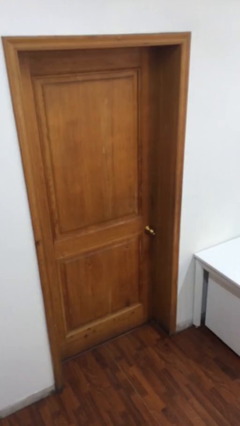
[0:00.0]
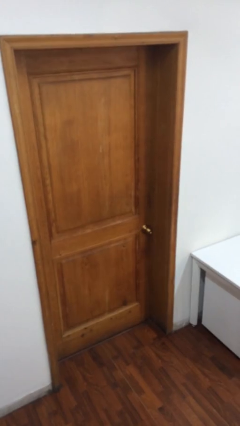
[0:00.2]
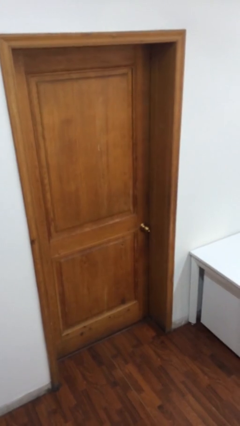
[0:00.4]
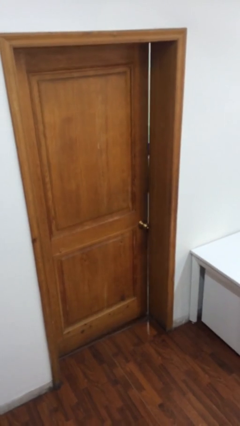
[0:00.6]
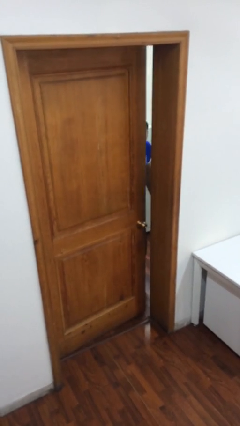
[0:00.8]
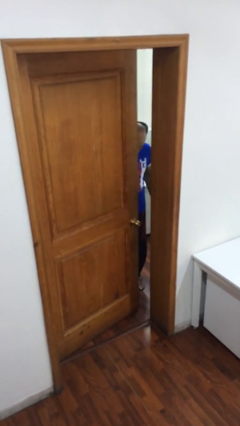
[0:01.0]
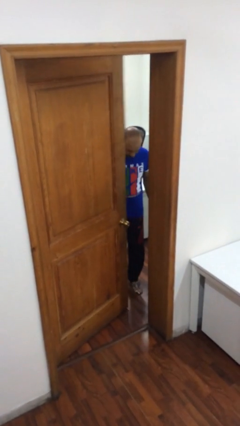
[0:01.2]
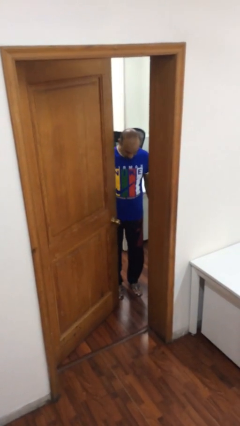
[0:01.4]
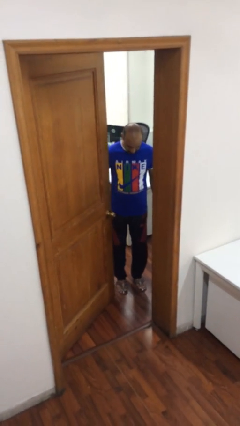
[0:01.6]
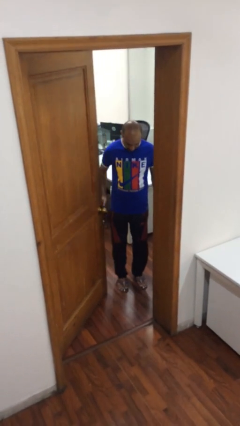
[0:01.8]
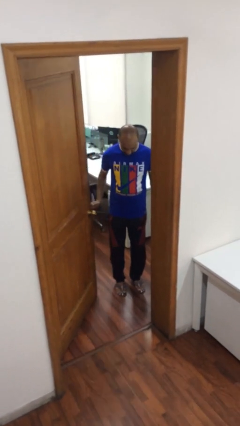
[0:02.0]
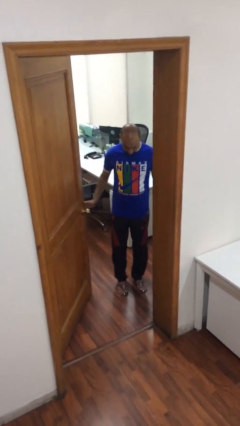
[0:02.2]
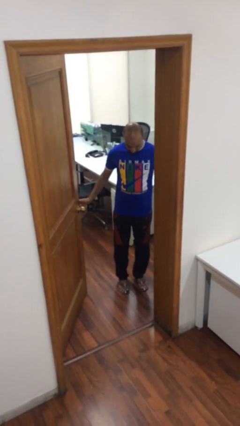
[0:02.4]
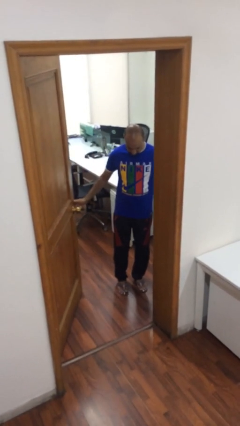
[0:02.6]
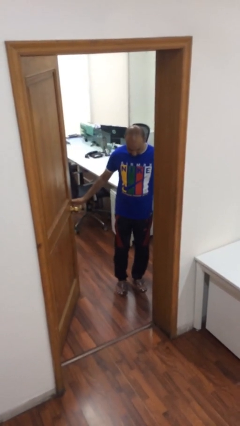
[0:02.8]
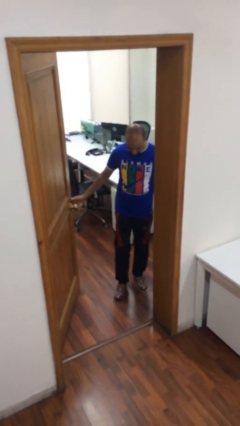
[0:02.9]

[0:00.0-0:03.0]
person opens facility door

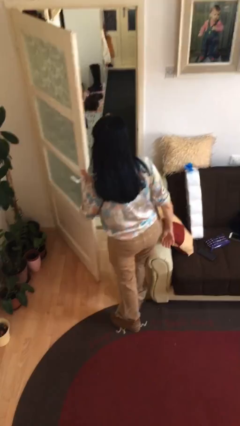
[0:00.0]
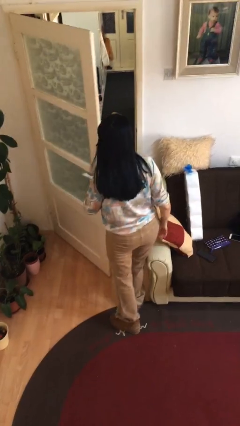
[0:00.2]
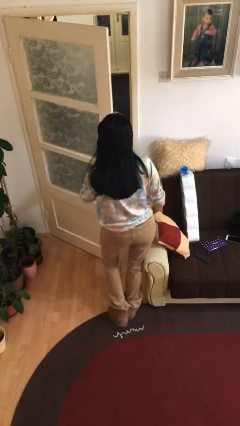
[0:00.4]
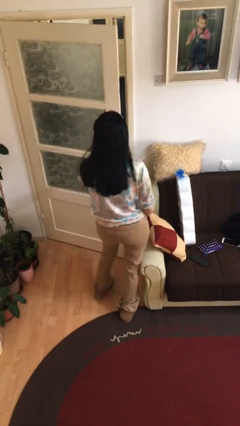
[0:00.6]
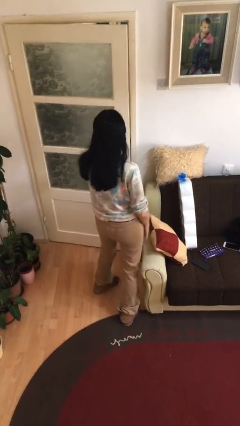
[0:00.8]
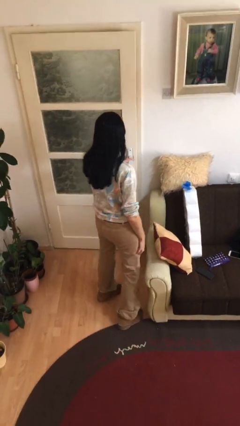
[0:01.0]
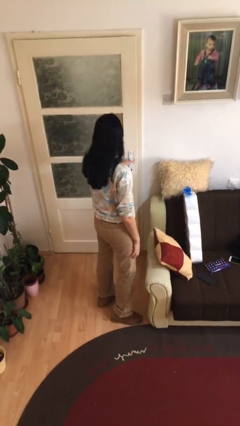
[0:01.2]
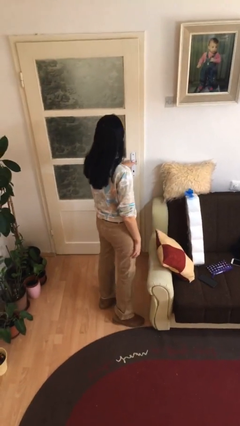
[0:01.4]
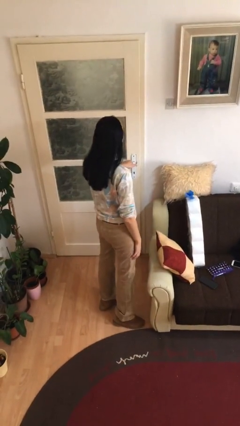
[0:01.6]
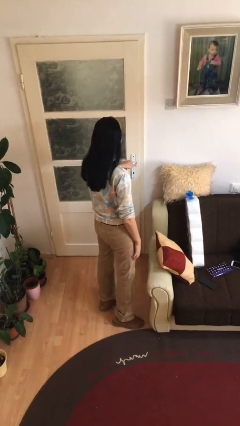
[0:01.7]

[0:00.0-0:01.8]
person closes facility door

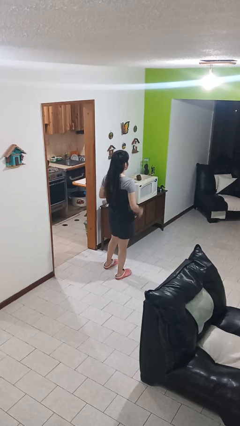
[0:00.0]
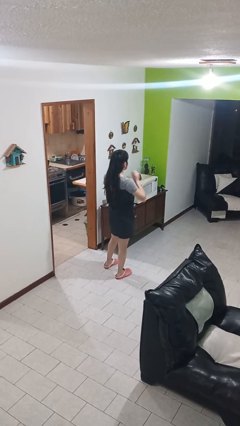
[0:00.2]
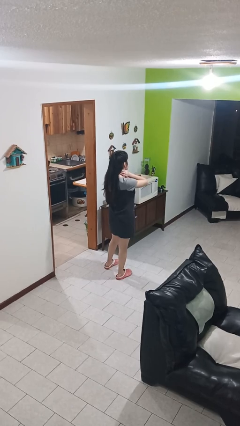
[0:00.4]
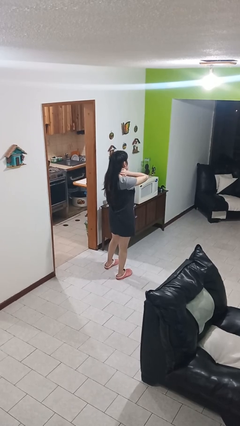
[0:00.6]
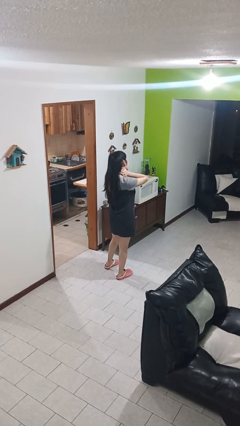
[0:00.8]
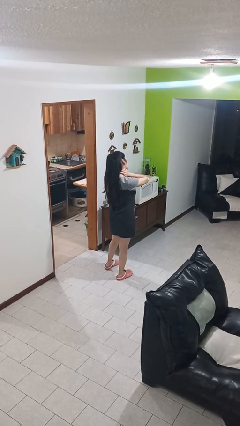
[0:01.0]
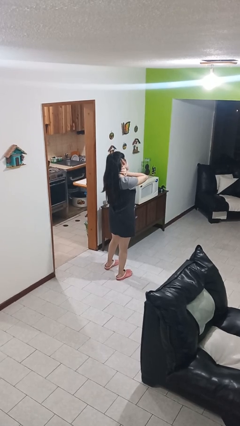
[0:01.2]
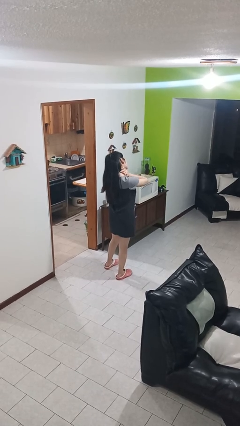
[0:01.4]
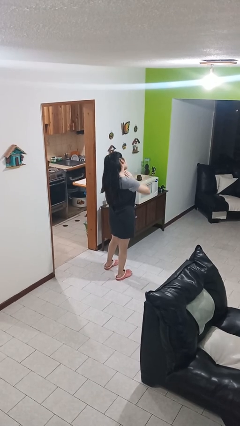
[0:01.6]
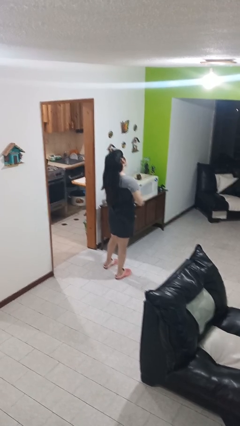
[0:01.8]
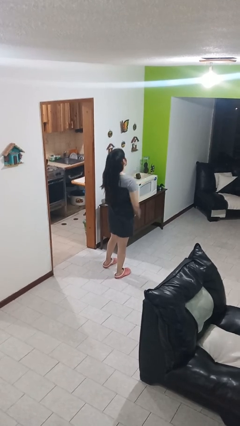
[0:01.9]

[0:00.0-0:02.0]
person rubs neck

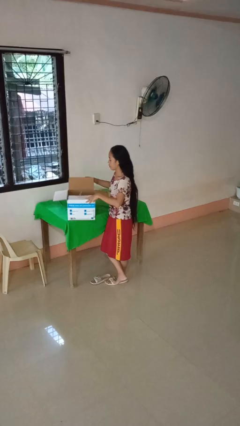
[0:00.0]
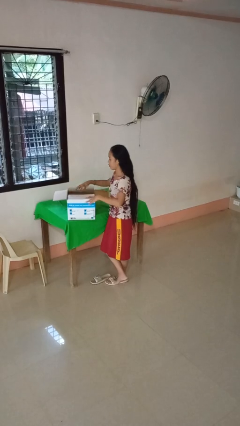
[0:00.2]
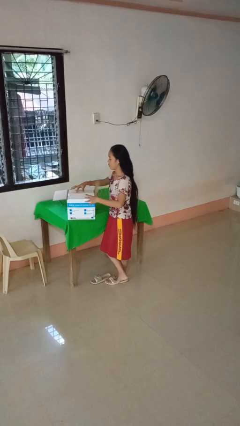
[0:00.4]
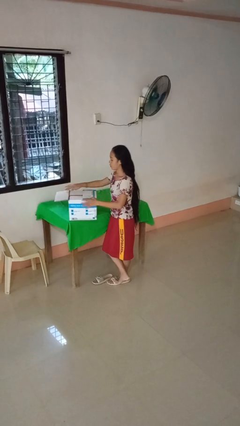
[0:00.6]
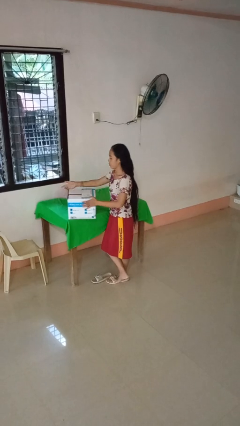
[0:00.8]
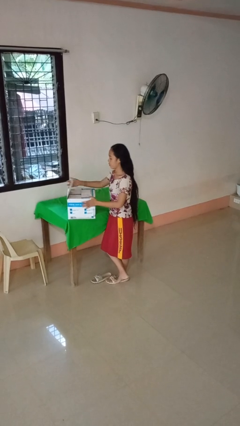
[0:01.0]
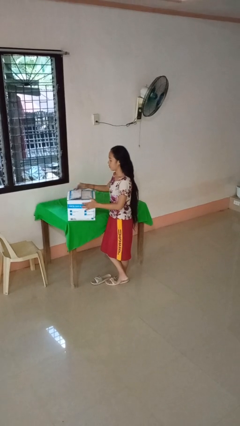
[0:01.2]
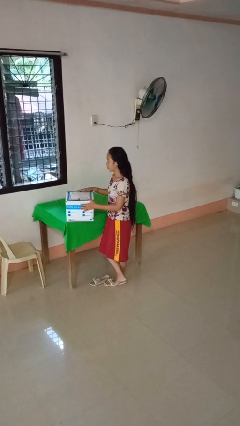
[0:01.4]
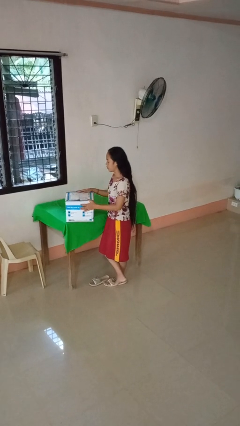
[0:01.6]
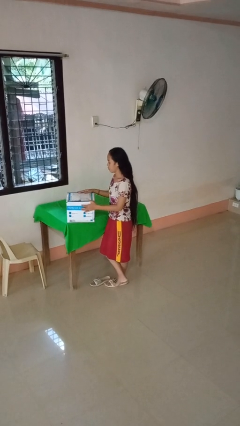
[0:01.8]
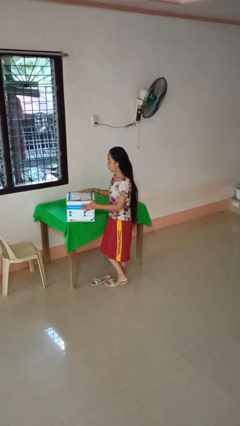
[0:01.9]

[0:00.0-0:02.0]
person closes box

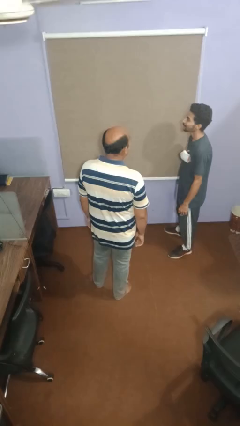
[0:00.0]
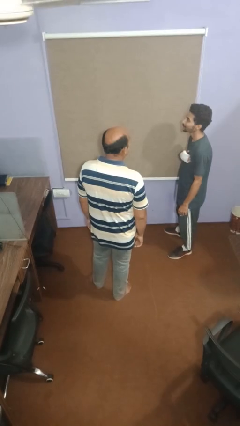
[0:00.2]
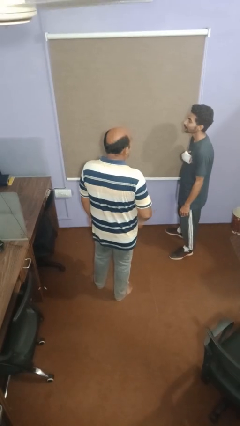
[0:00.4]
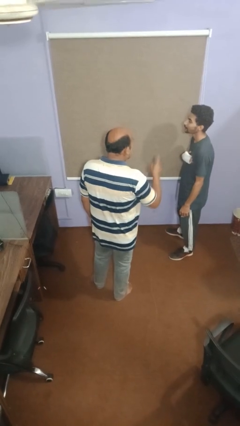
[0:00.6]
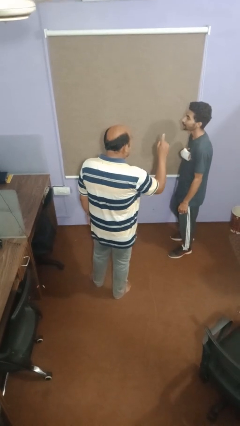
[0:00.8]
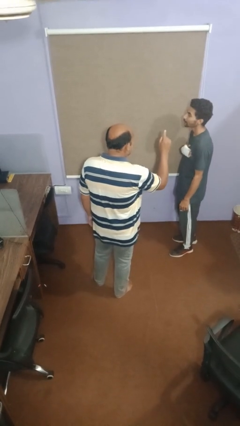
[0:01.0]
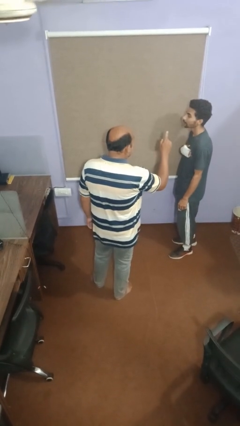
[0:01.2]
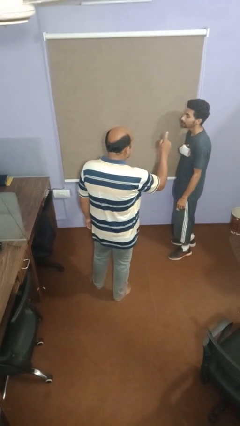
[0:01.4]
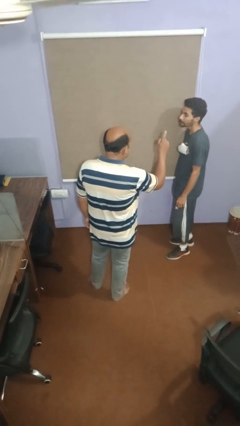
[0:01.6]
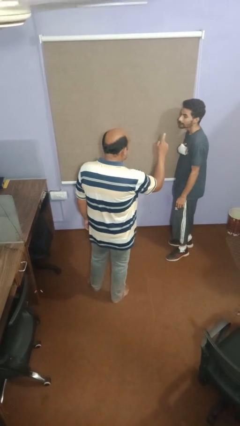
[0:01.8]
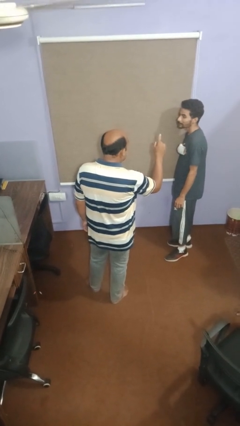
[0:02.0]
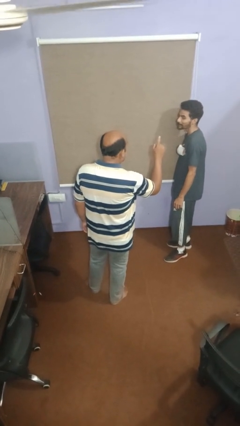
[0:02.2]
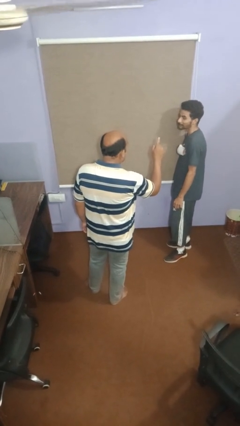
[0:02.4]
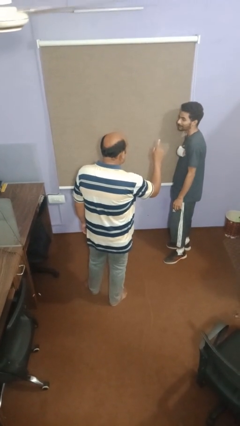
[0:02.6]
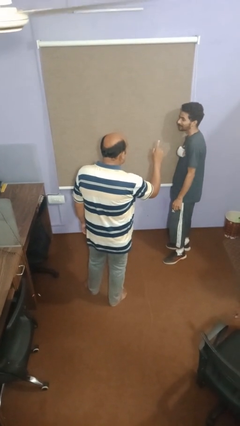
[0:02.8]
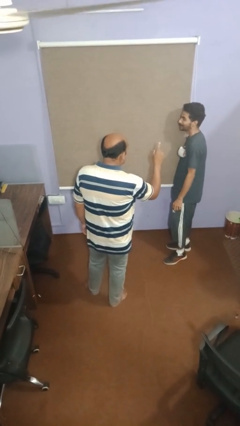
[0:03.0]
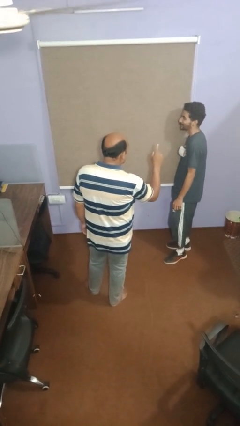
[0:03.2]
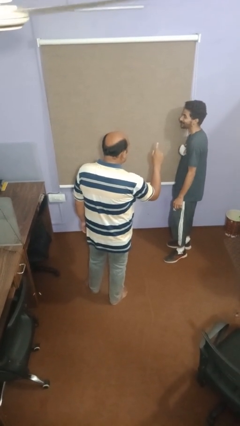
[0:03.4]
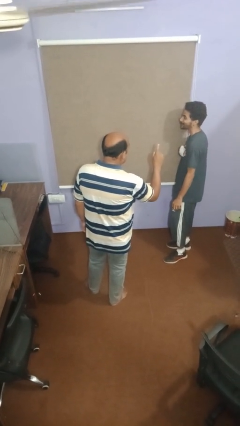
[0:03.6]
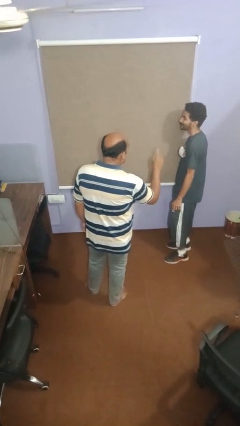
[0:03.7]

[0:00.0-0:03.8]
person points at person

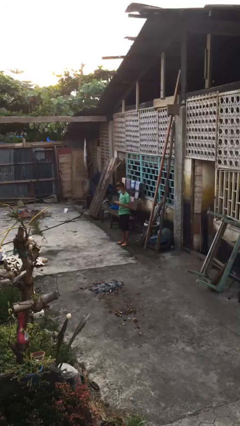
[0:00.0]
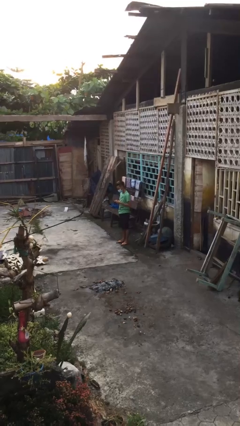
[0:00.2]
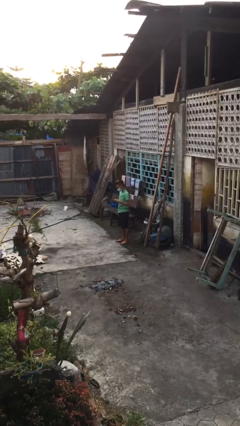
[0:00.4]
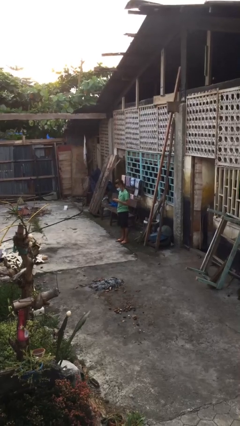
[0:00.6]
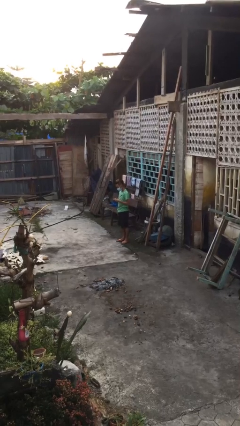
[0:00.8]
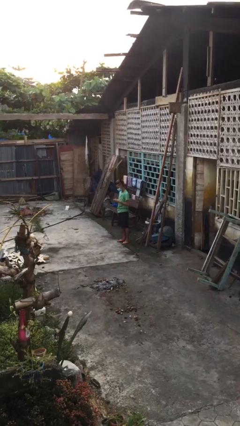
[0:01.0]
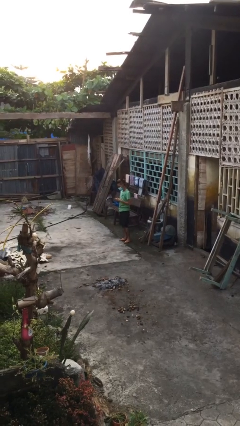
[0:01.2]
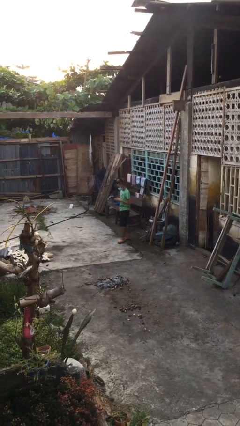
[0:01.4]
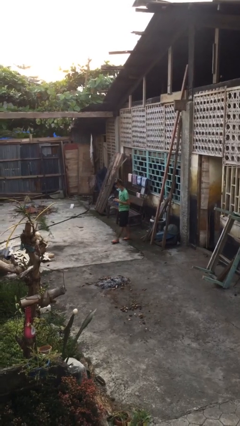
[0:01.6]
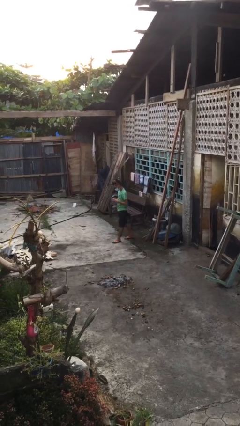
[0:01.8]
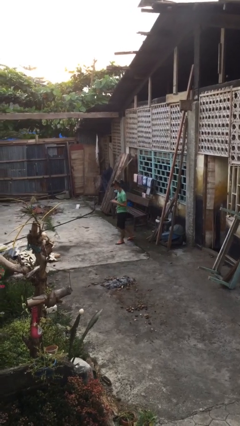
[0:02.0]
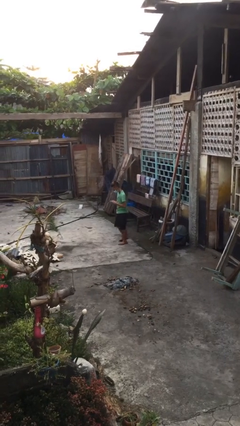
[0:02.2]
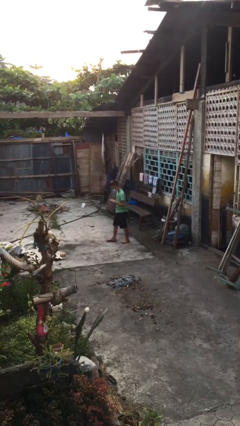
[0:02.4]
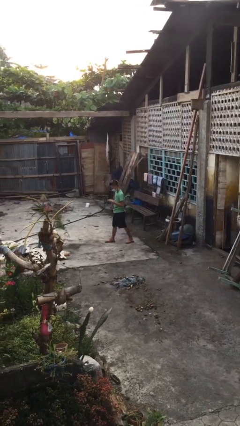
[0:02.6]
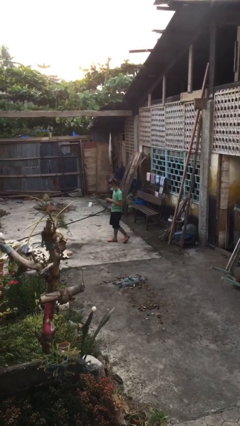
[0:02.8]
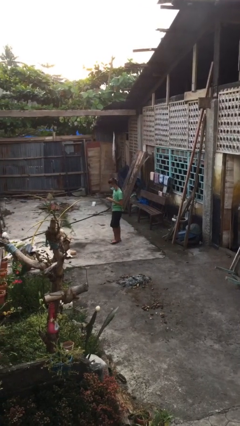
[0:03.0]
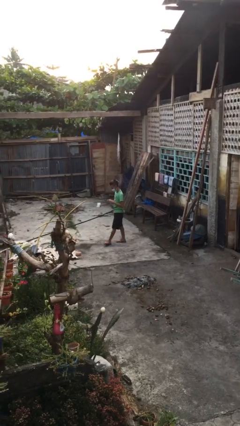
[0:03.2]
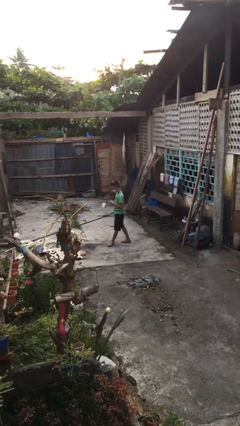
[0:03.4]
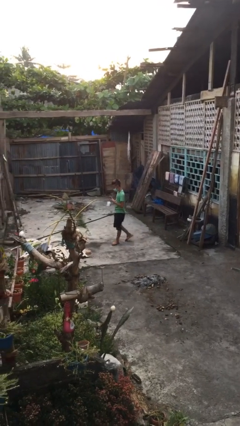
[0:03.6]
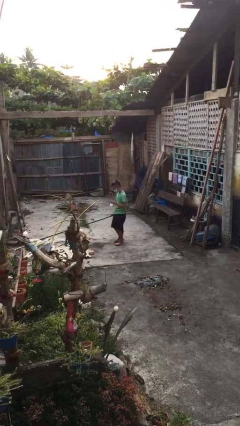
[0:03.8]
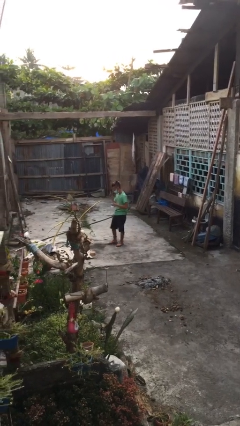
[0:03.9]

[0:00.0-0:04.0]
person texts on phone

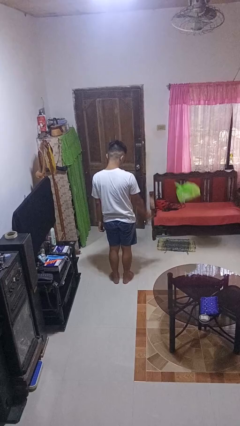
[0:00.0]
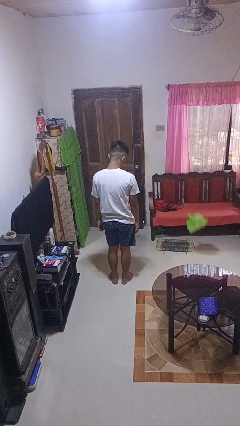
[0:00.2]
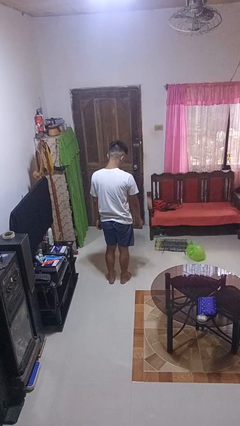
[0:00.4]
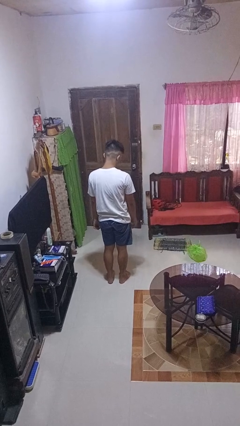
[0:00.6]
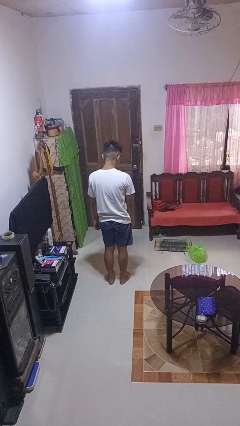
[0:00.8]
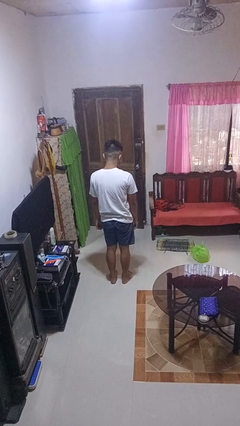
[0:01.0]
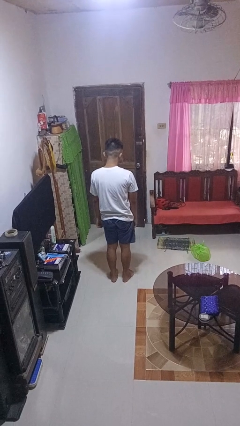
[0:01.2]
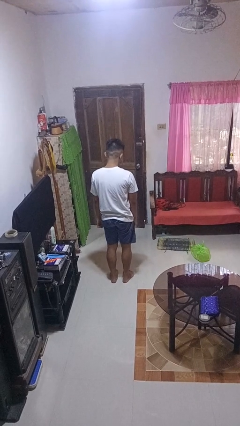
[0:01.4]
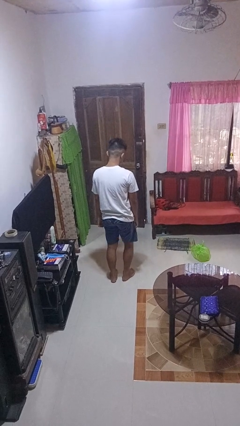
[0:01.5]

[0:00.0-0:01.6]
person throws object to ground
